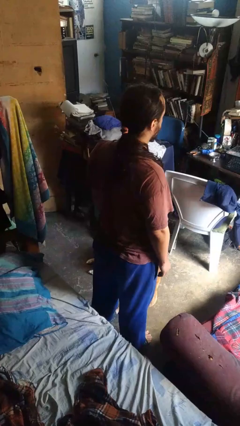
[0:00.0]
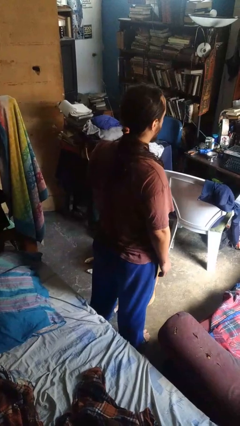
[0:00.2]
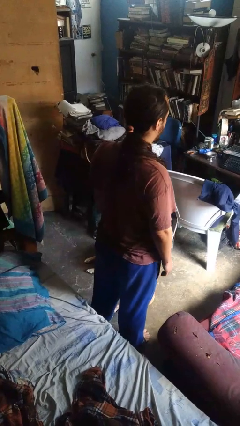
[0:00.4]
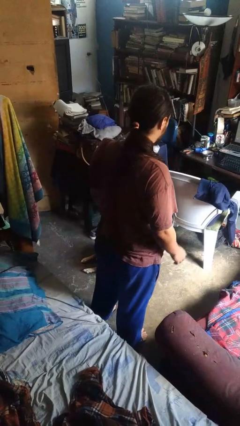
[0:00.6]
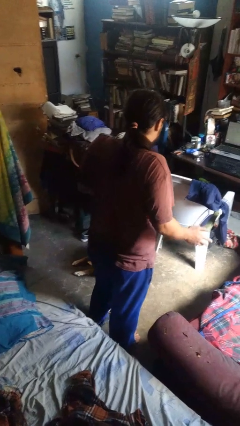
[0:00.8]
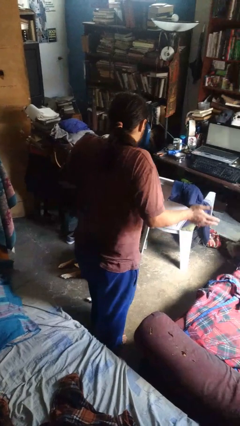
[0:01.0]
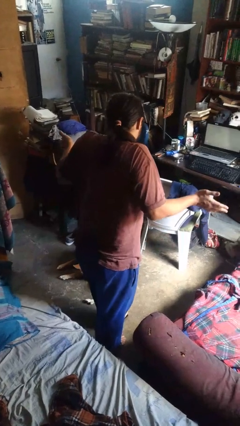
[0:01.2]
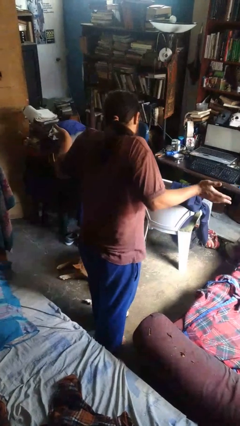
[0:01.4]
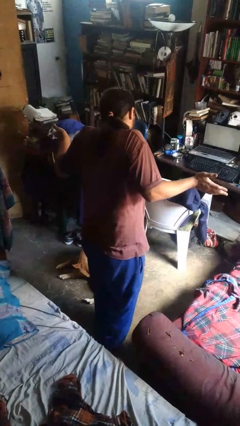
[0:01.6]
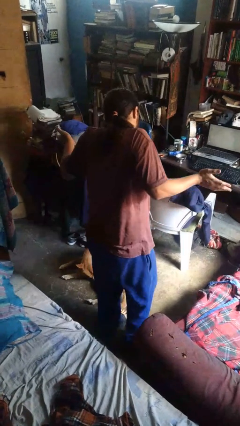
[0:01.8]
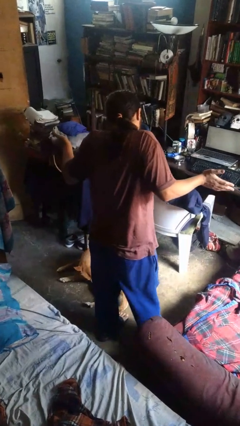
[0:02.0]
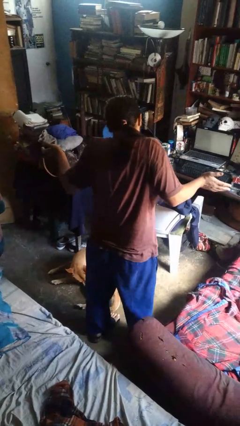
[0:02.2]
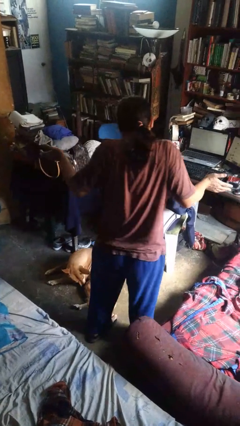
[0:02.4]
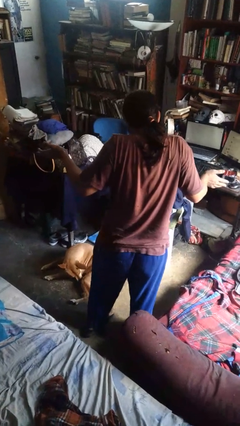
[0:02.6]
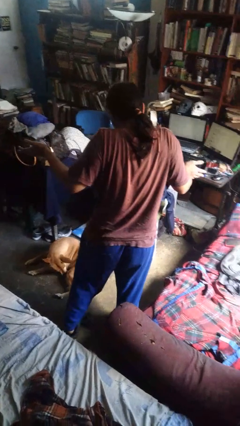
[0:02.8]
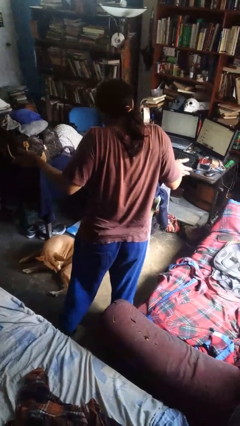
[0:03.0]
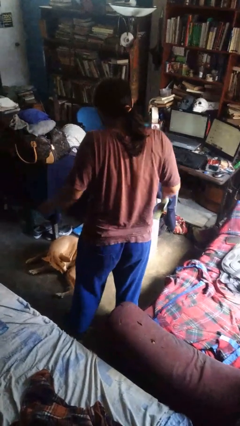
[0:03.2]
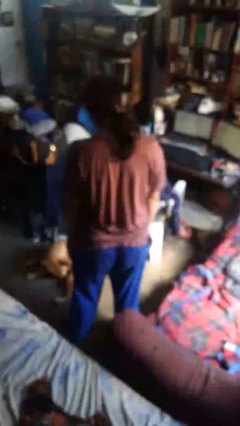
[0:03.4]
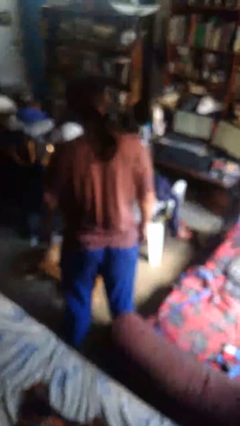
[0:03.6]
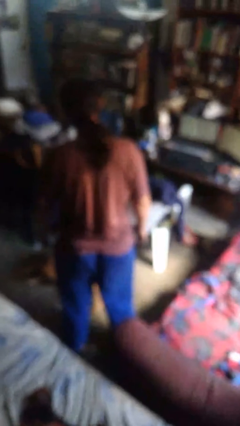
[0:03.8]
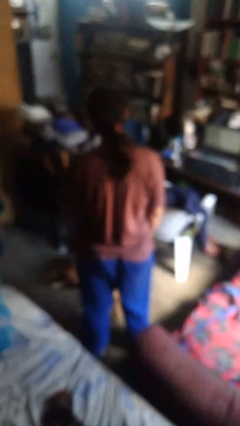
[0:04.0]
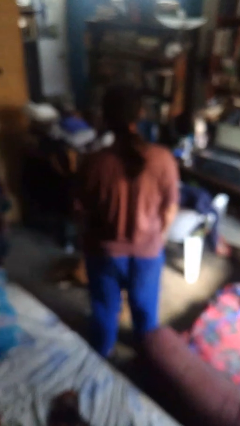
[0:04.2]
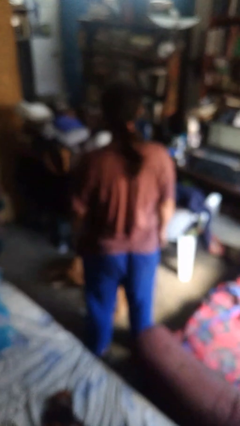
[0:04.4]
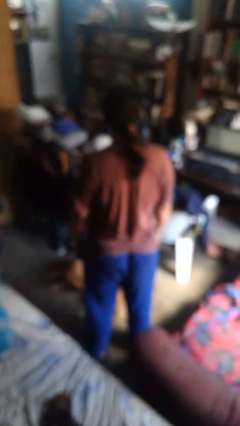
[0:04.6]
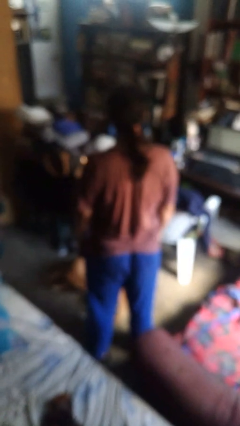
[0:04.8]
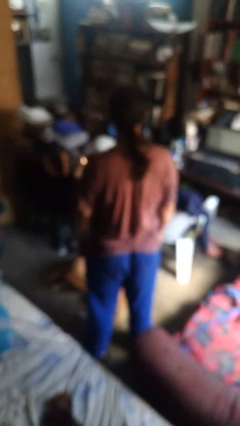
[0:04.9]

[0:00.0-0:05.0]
person shrugs

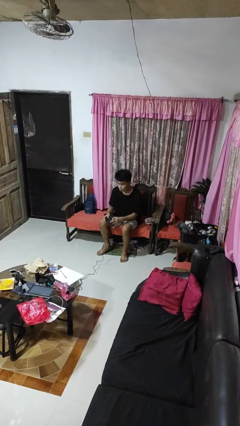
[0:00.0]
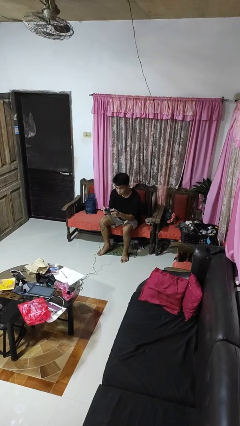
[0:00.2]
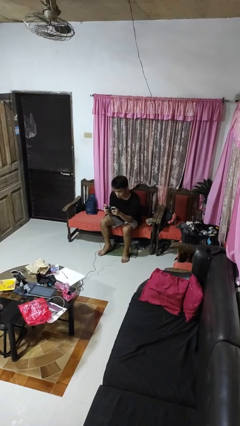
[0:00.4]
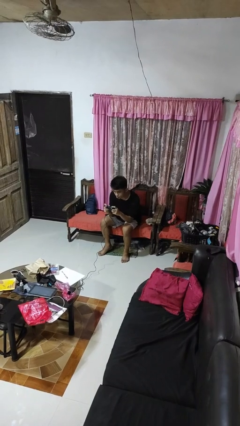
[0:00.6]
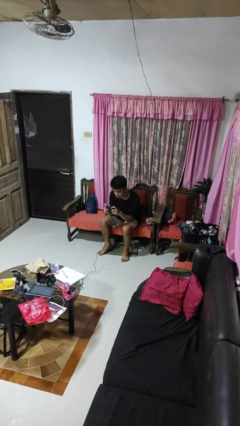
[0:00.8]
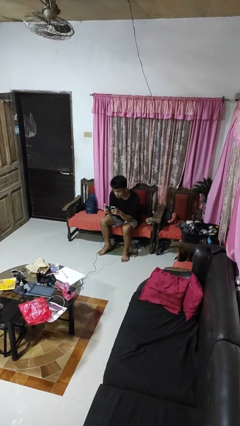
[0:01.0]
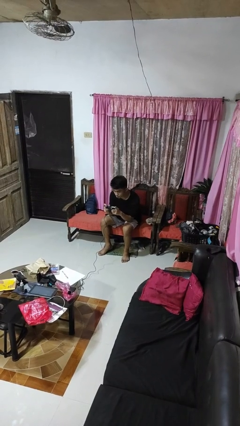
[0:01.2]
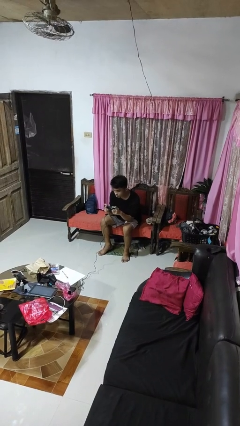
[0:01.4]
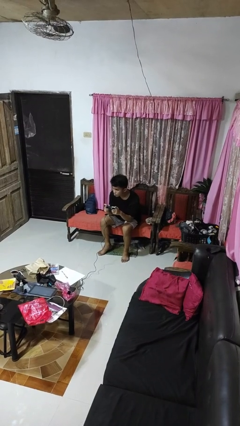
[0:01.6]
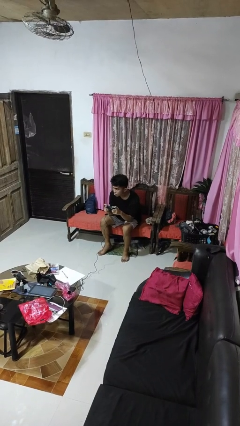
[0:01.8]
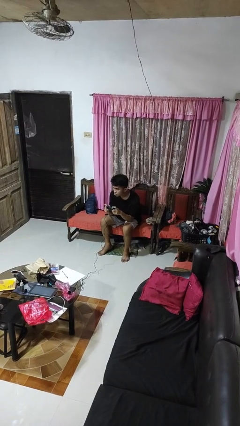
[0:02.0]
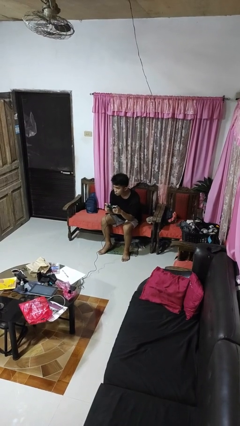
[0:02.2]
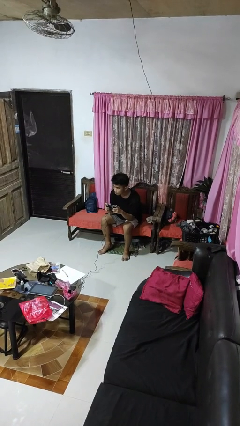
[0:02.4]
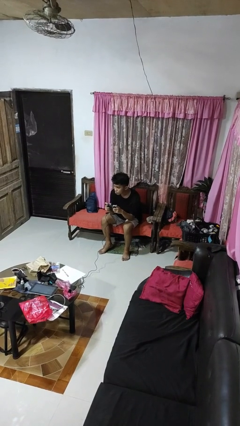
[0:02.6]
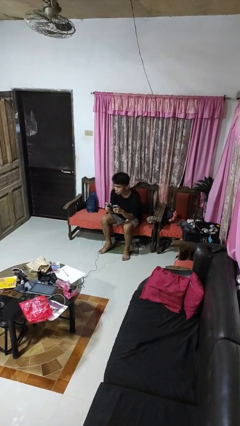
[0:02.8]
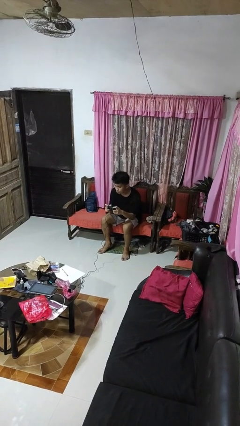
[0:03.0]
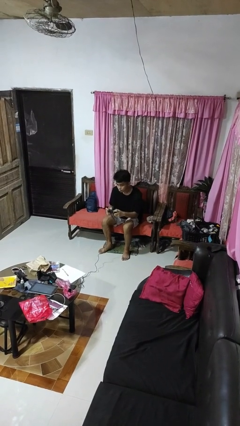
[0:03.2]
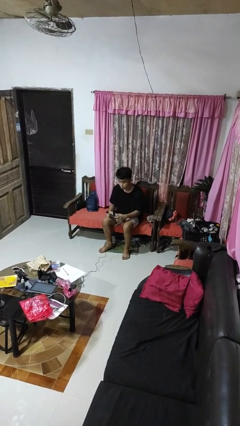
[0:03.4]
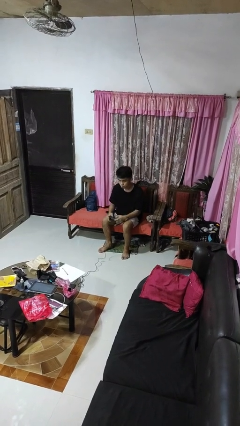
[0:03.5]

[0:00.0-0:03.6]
person interacts with handheld game

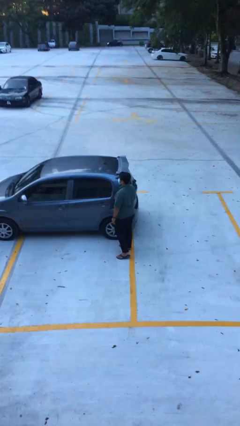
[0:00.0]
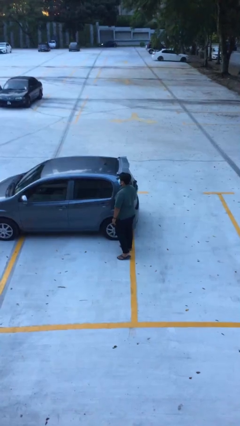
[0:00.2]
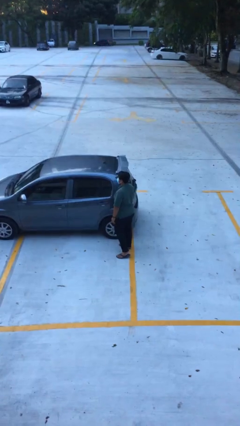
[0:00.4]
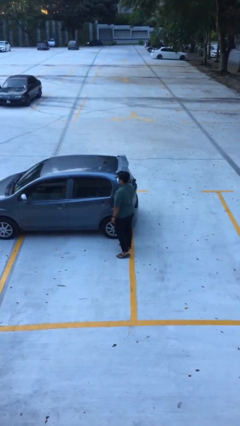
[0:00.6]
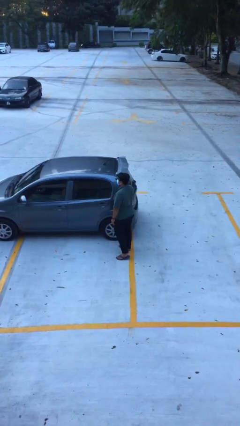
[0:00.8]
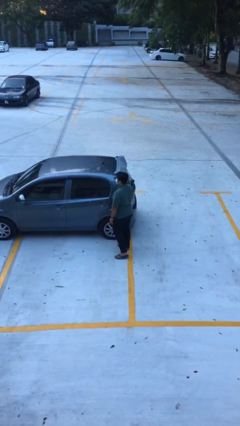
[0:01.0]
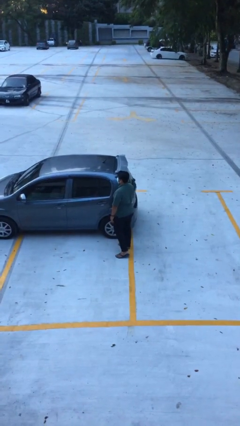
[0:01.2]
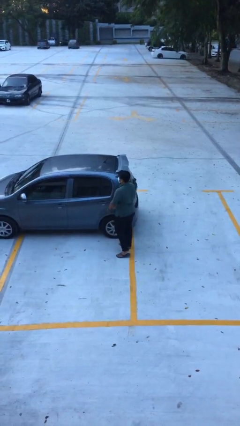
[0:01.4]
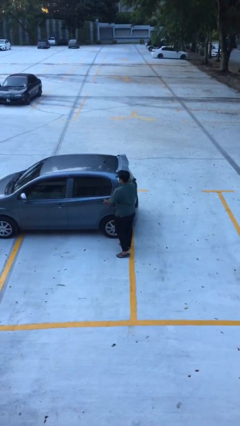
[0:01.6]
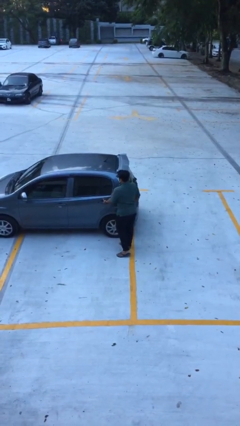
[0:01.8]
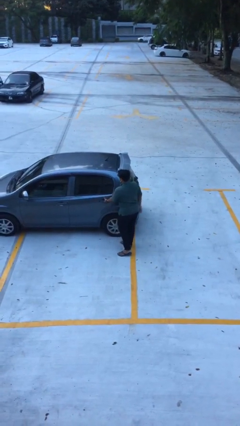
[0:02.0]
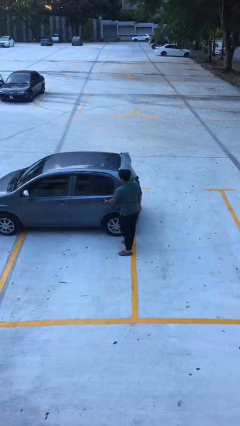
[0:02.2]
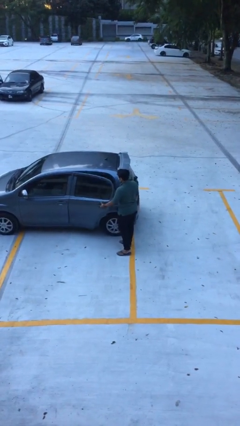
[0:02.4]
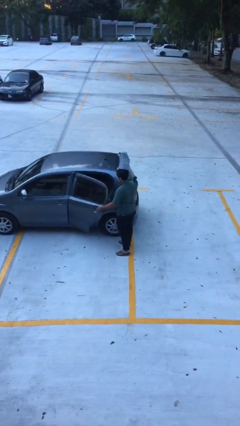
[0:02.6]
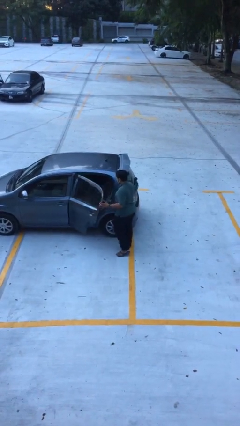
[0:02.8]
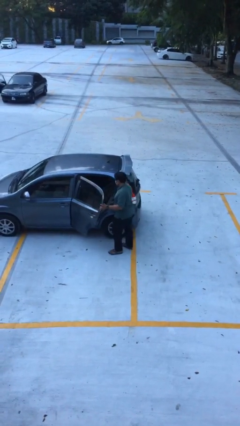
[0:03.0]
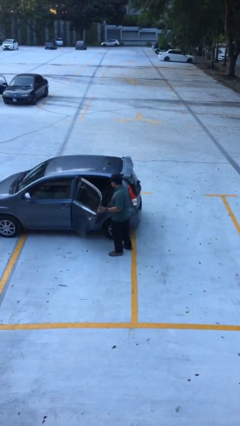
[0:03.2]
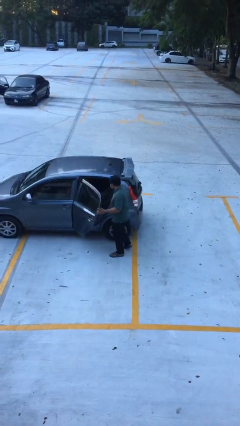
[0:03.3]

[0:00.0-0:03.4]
person opens car door

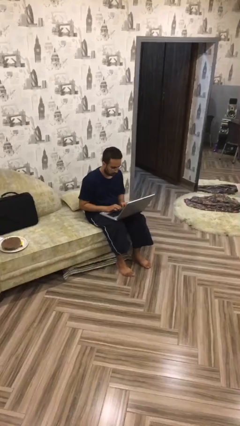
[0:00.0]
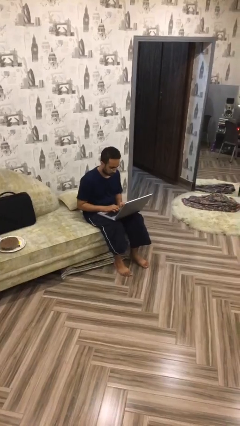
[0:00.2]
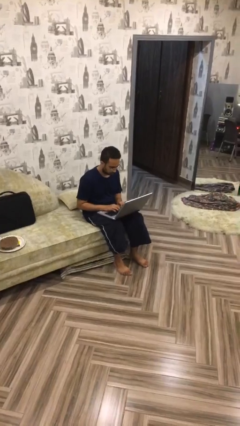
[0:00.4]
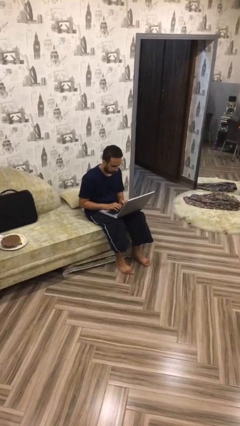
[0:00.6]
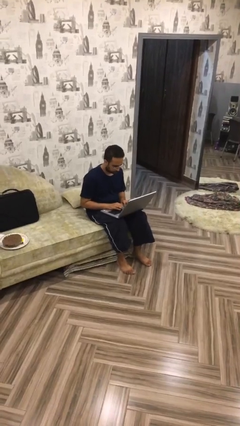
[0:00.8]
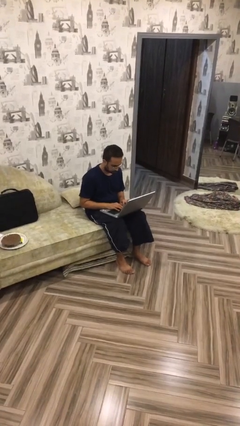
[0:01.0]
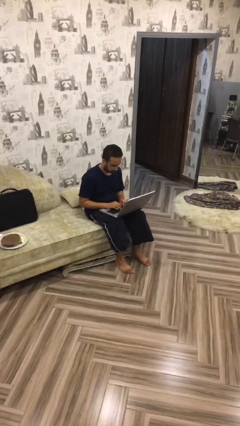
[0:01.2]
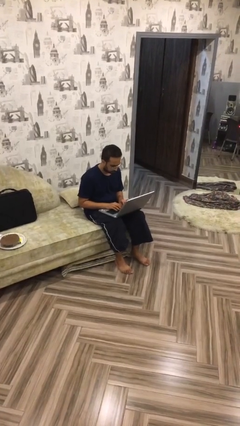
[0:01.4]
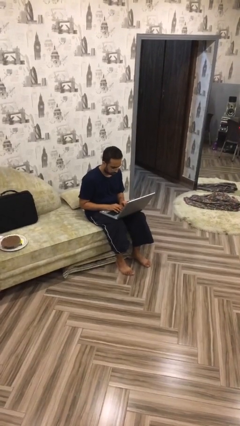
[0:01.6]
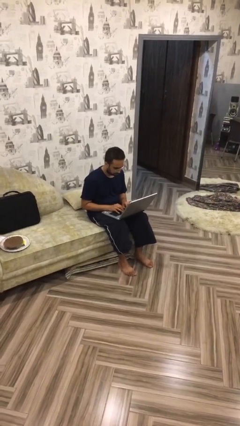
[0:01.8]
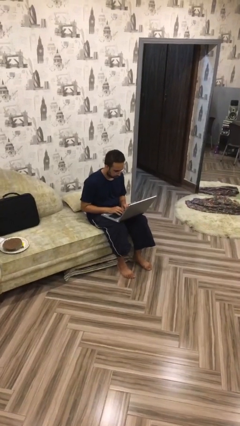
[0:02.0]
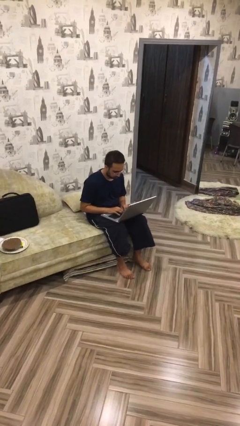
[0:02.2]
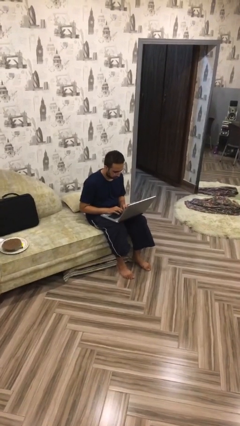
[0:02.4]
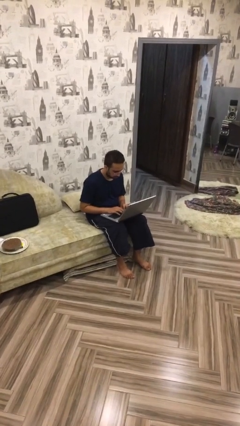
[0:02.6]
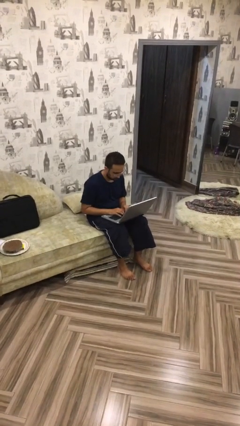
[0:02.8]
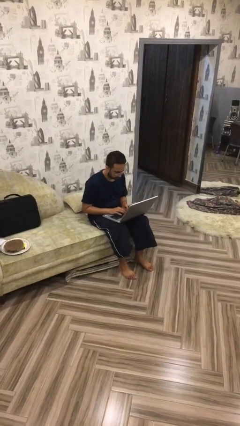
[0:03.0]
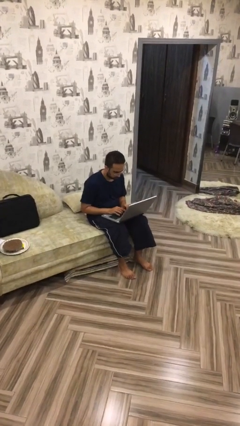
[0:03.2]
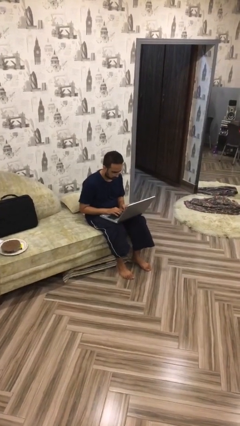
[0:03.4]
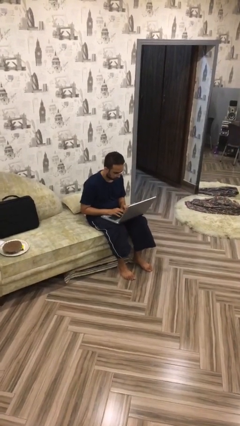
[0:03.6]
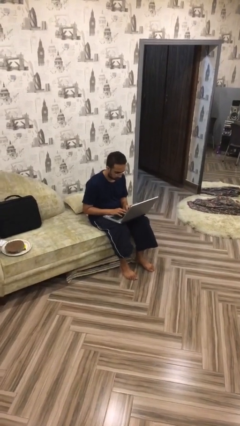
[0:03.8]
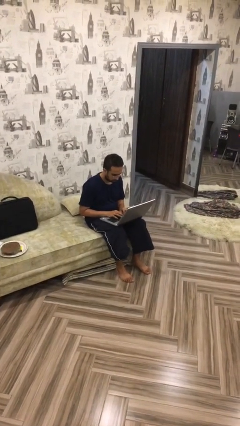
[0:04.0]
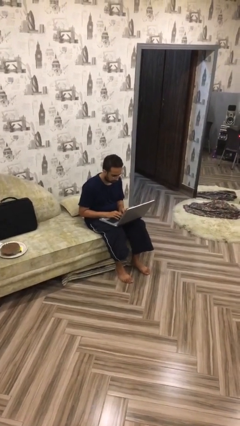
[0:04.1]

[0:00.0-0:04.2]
person interacts with laptop

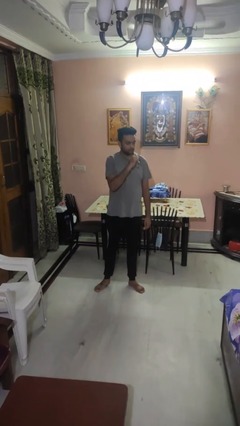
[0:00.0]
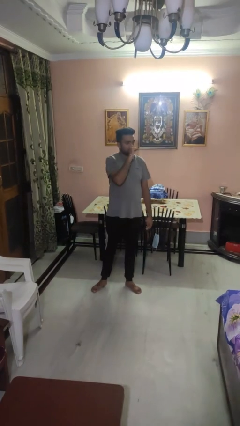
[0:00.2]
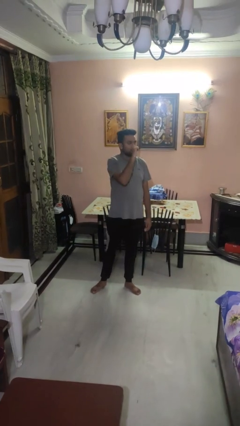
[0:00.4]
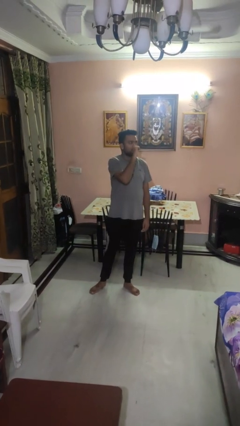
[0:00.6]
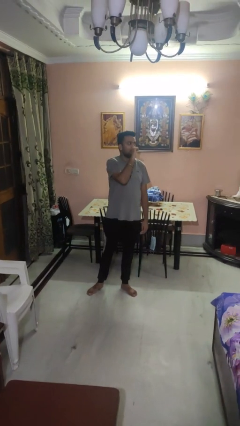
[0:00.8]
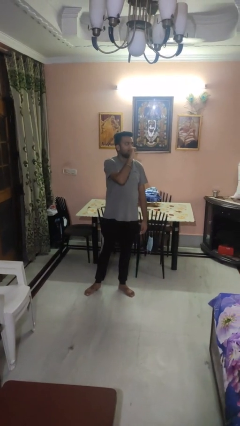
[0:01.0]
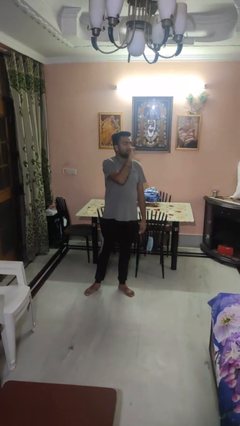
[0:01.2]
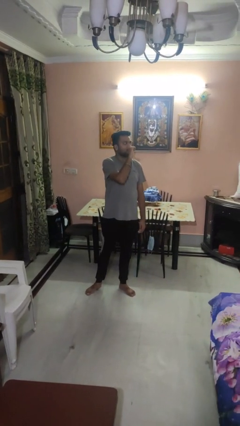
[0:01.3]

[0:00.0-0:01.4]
person vapes
